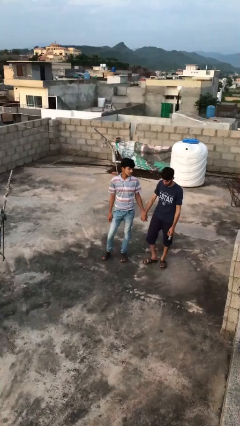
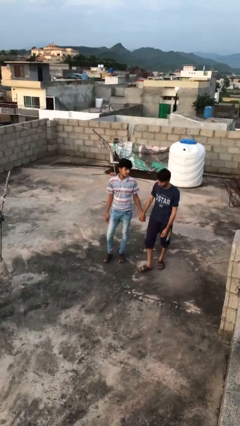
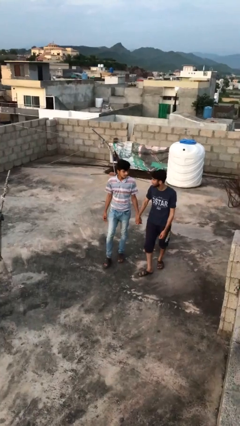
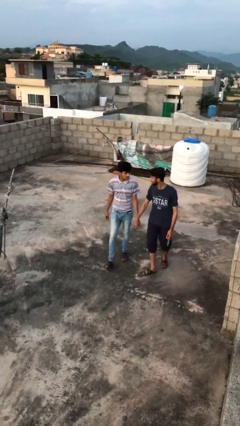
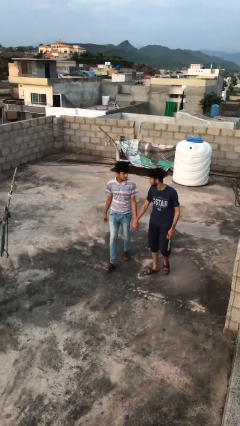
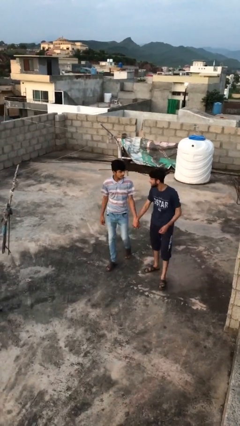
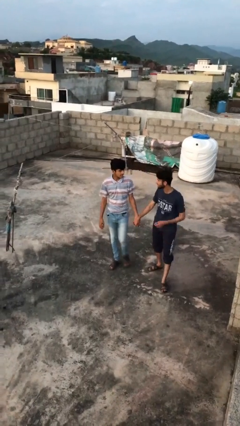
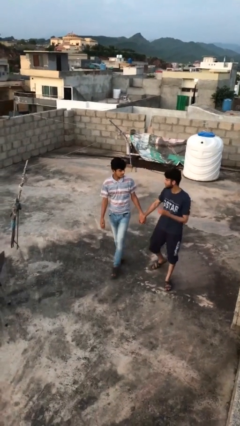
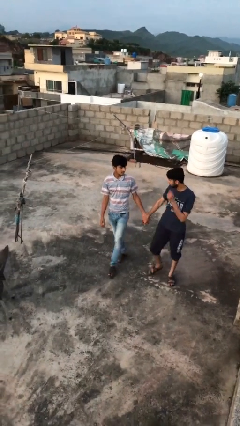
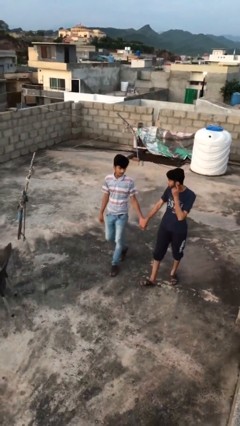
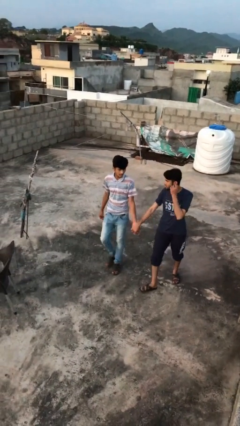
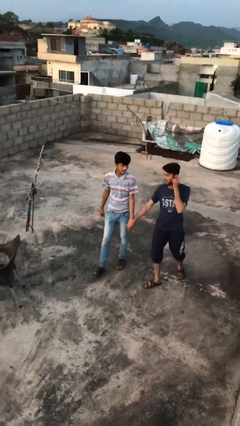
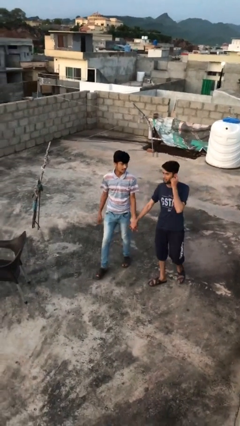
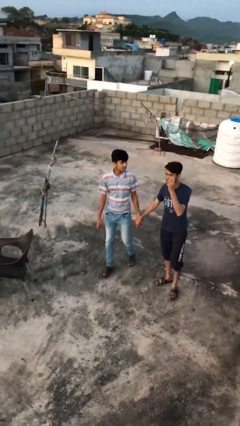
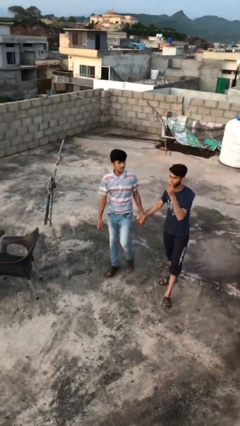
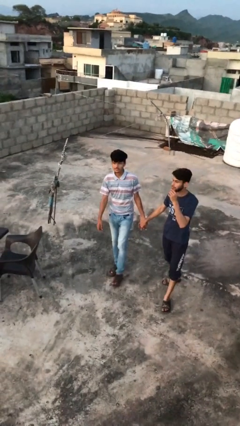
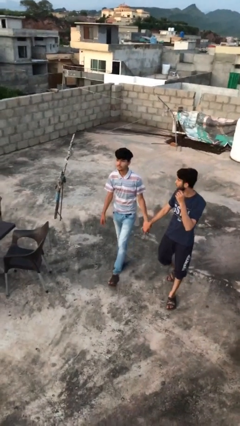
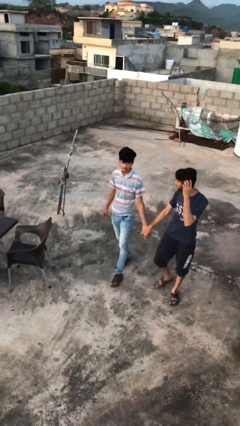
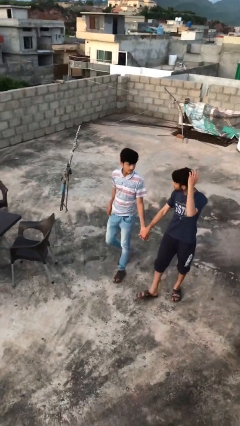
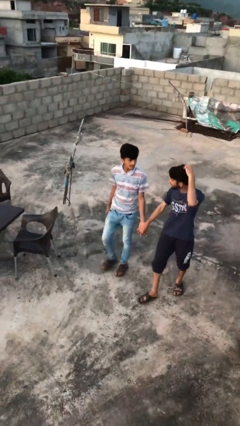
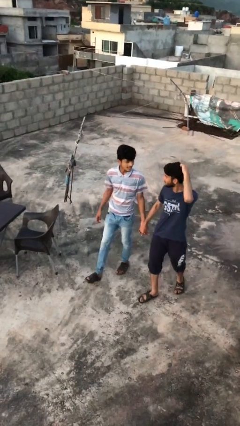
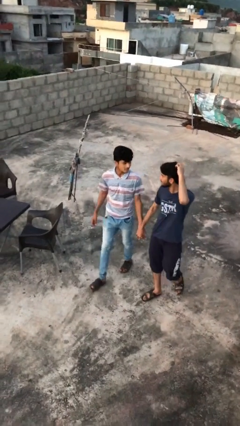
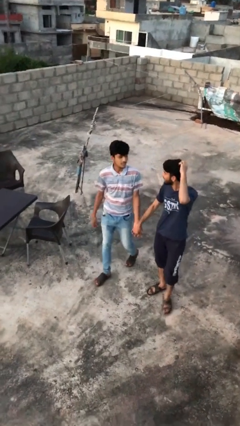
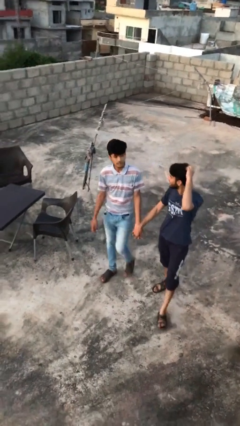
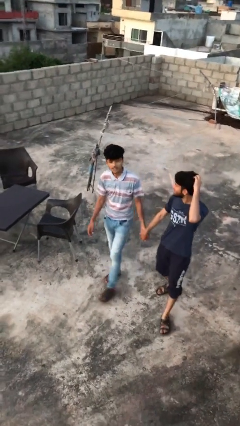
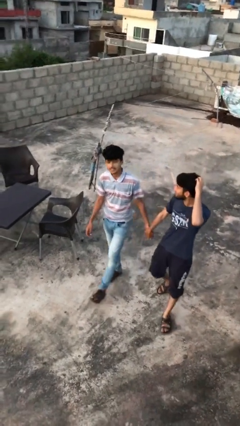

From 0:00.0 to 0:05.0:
person holds hand

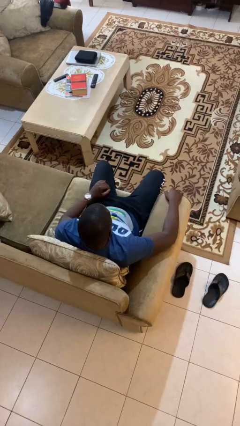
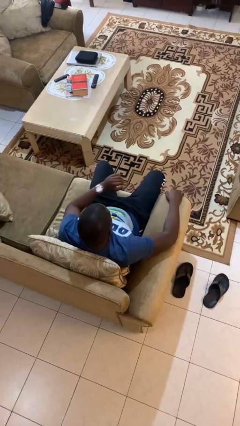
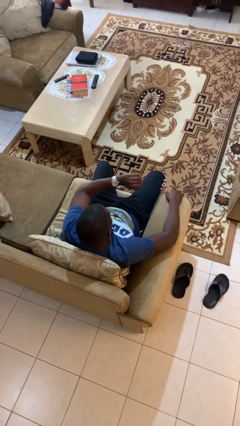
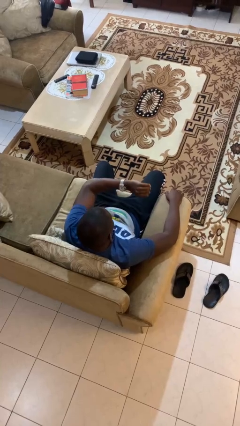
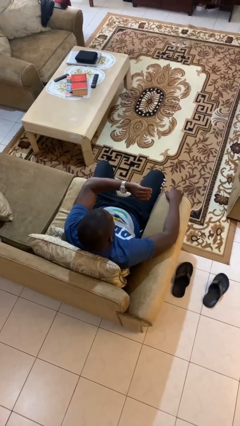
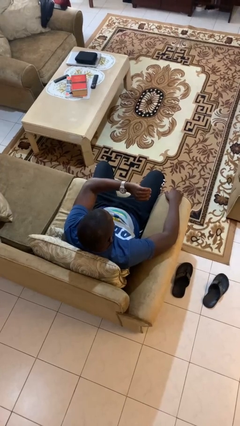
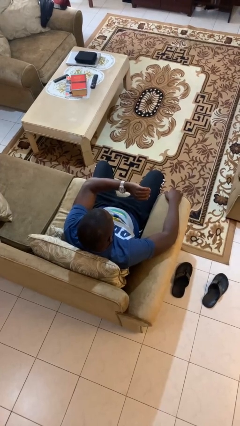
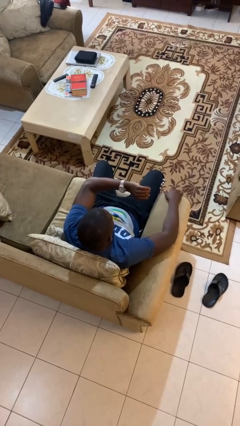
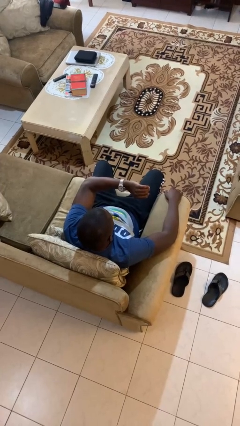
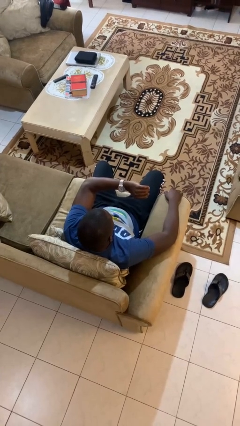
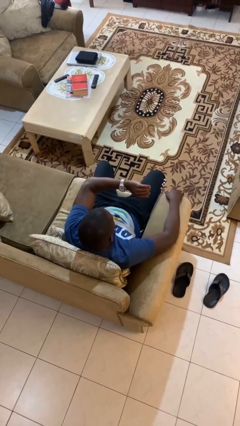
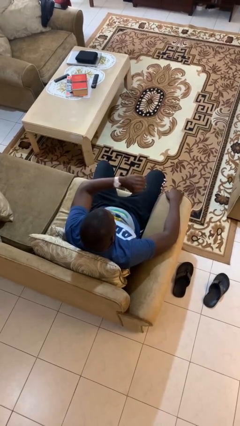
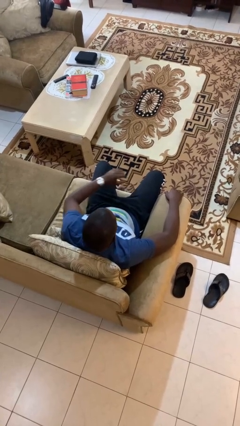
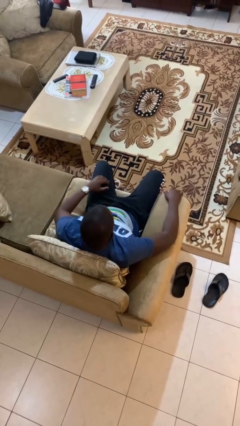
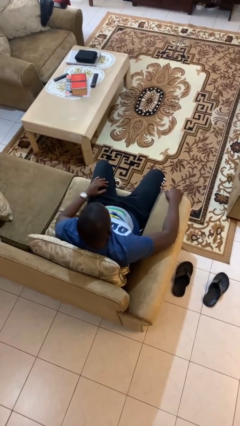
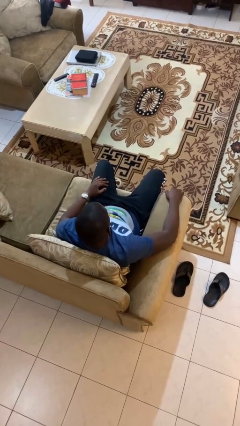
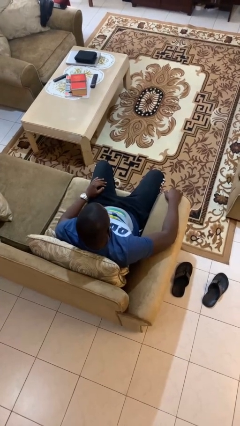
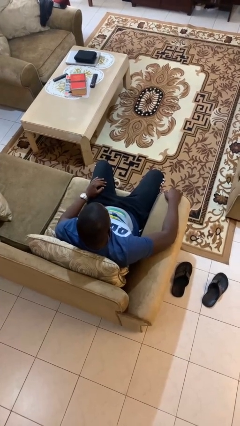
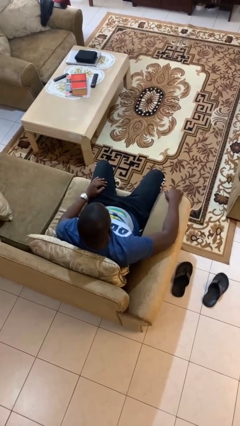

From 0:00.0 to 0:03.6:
person looks at wristwatch

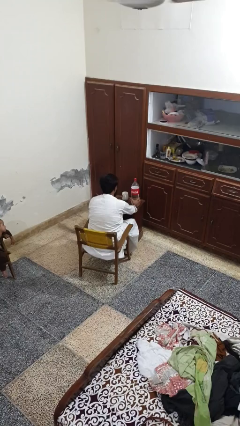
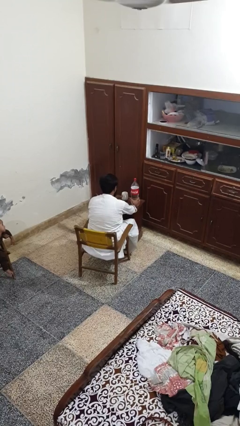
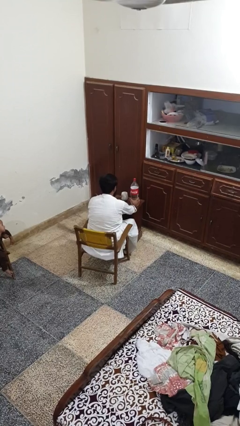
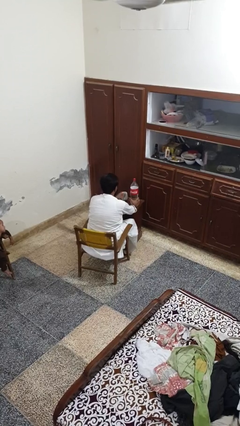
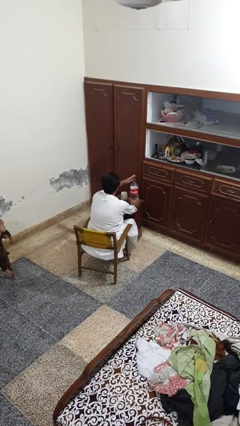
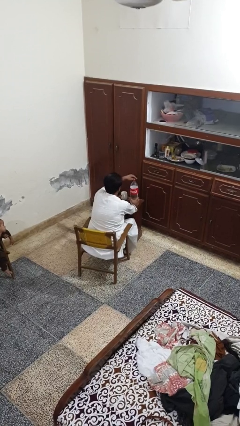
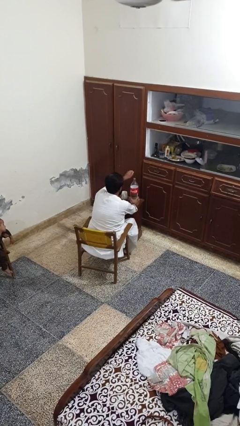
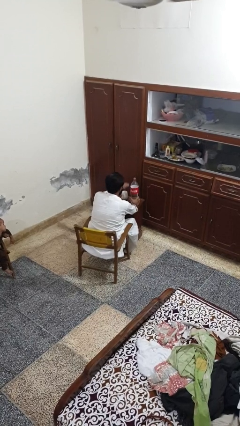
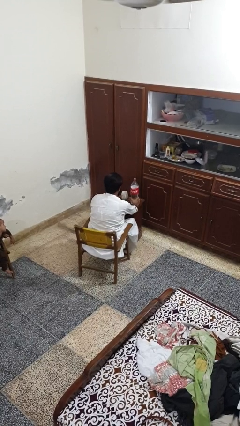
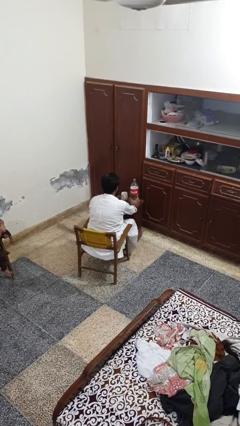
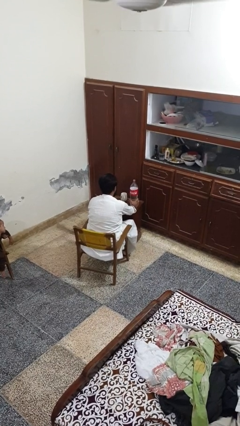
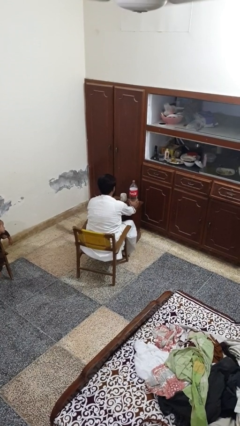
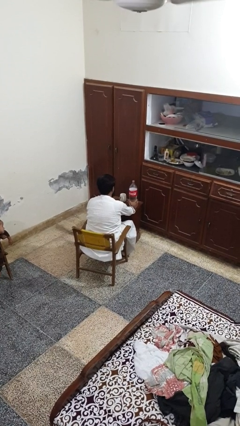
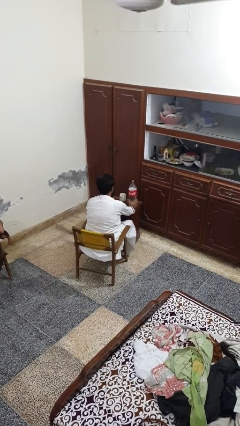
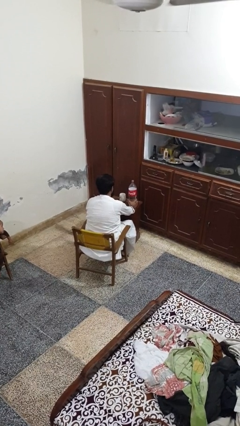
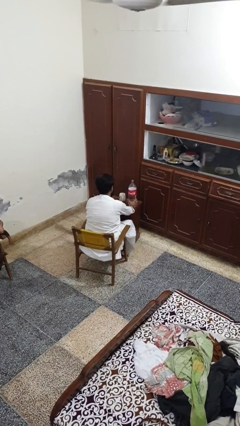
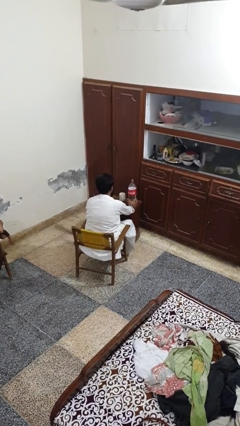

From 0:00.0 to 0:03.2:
person unscrews lid from bottle

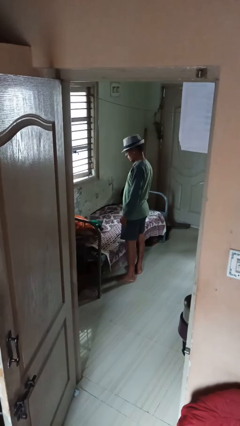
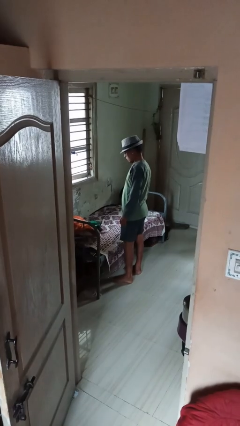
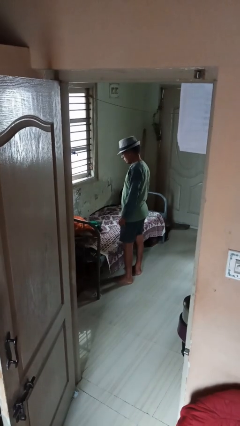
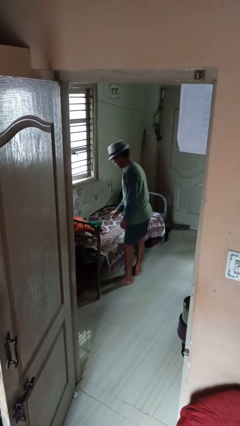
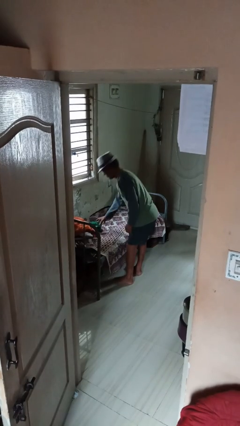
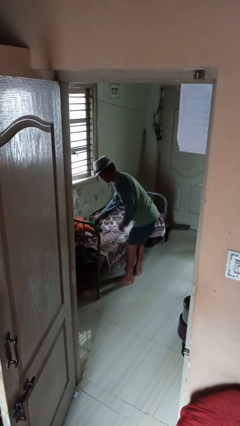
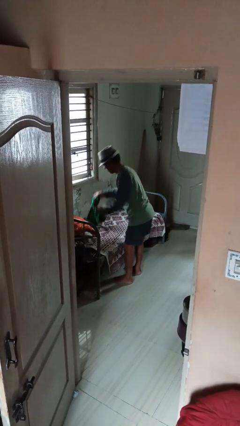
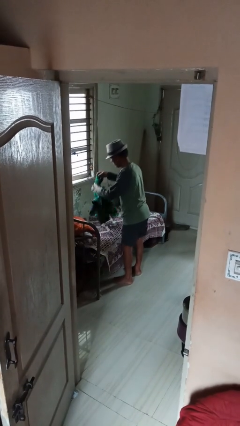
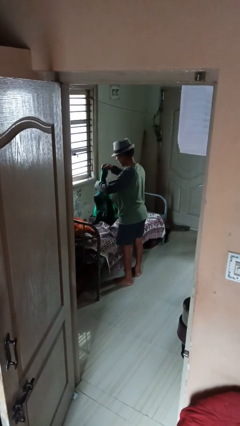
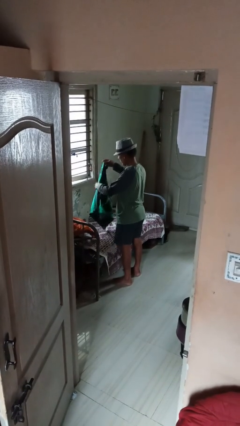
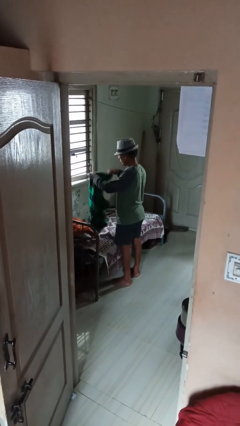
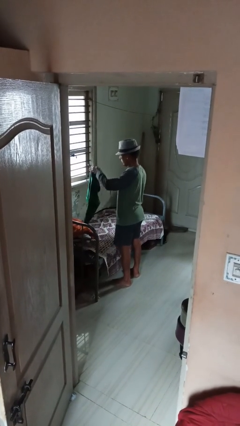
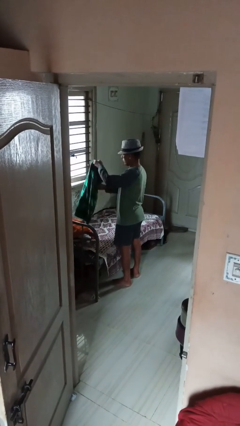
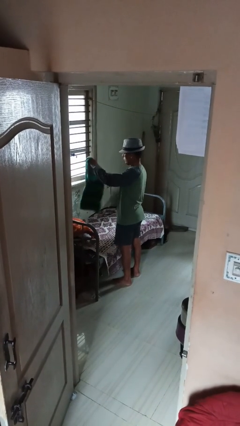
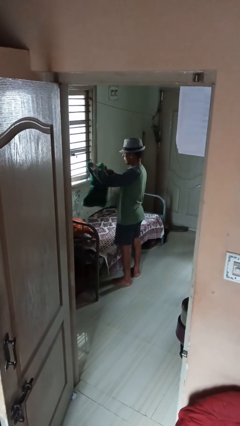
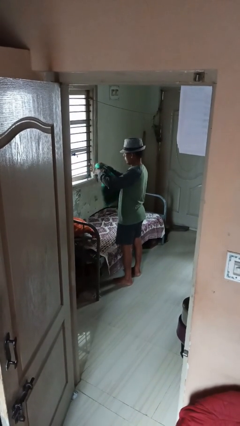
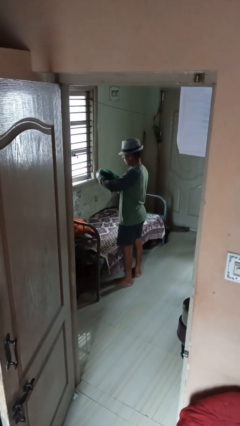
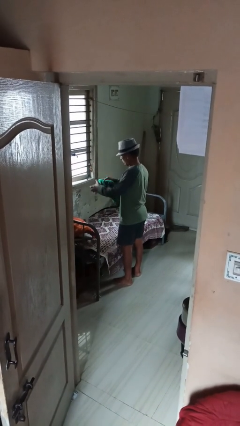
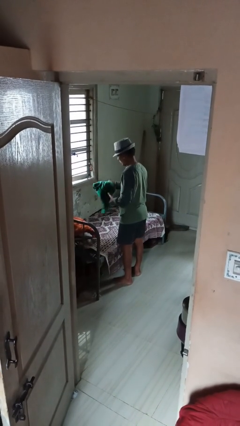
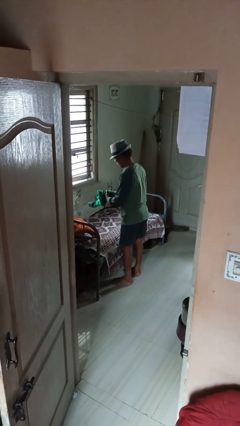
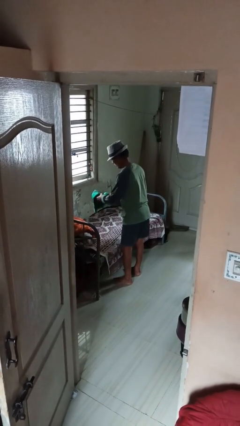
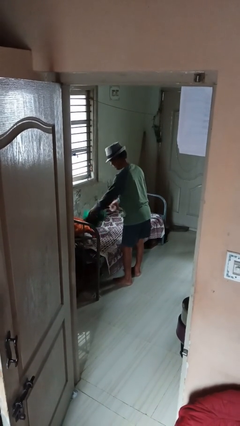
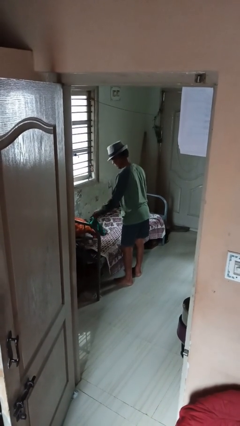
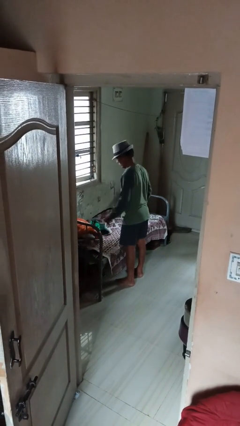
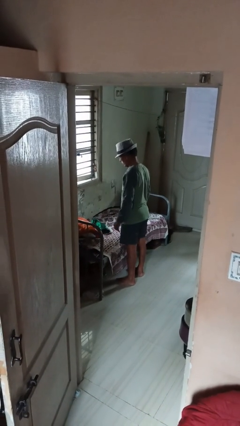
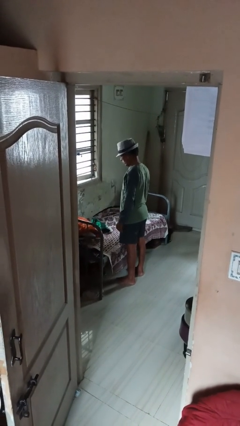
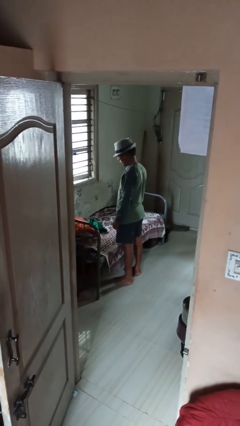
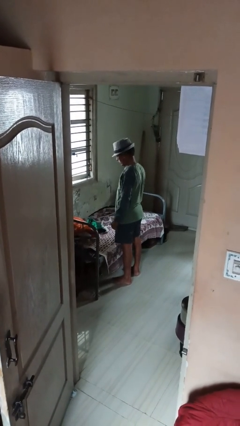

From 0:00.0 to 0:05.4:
person folds shirt

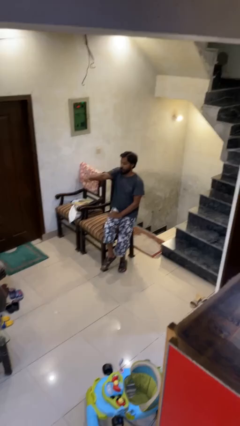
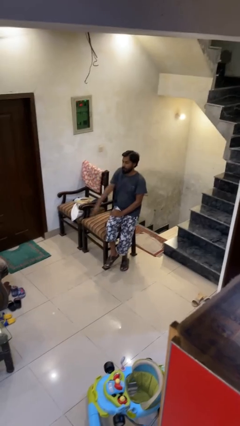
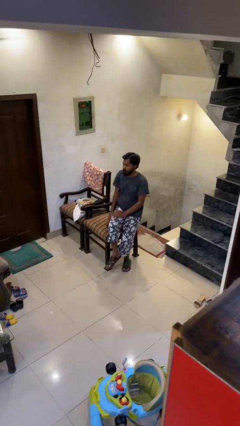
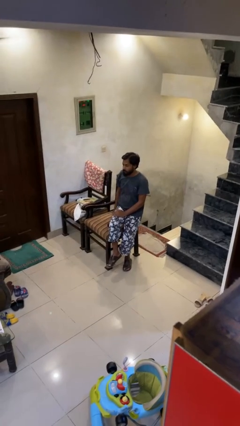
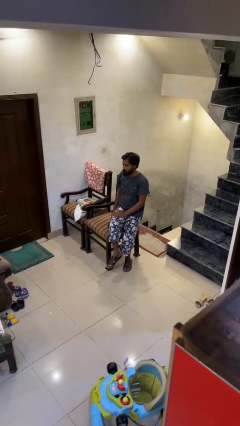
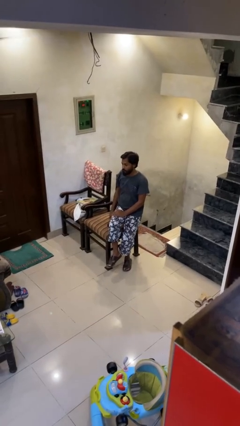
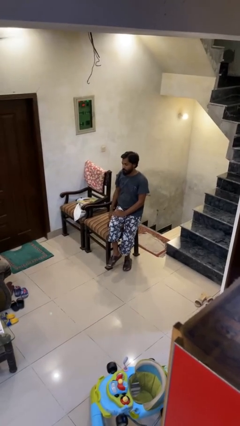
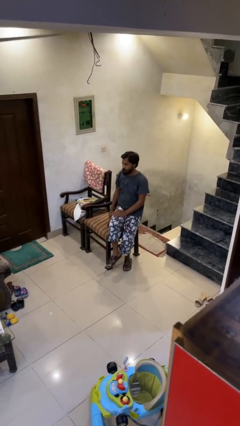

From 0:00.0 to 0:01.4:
person gestures lower hand
